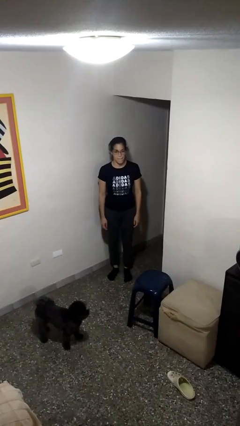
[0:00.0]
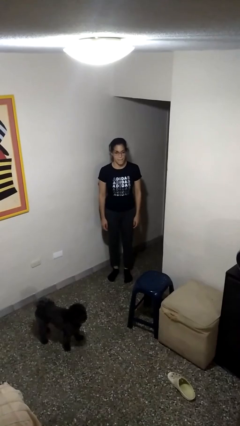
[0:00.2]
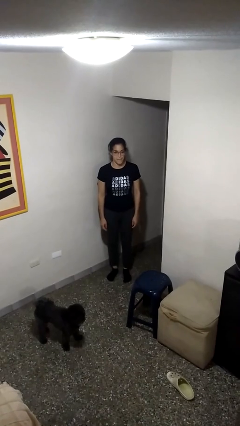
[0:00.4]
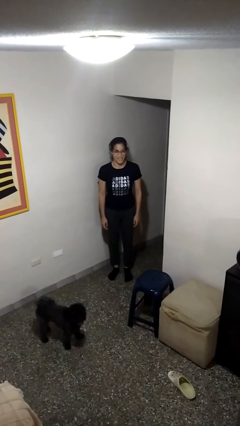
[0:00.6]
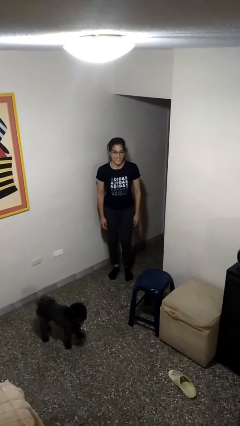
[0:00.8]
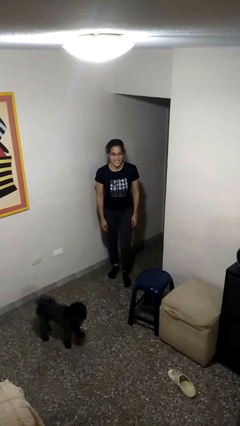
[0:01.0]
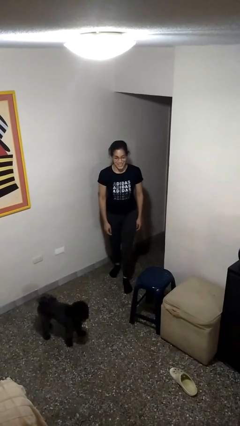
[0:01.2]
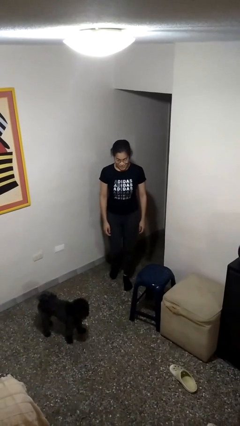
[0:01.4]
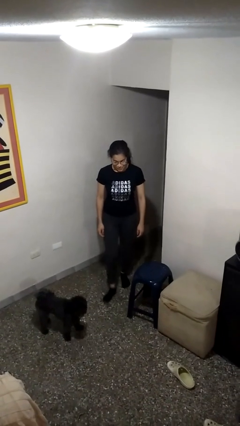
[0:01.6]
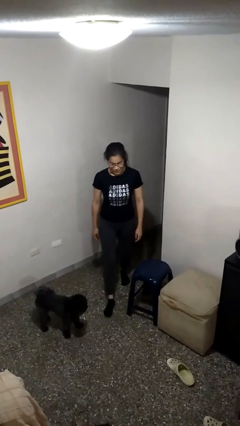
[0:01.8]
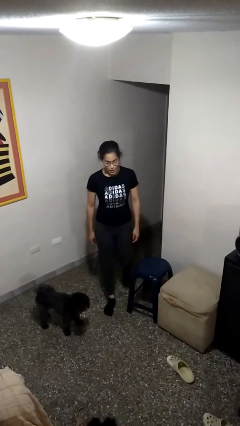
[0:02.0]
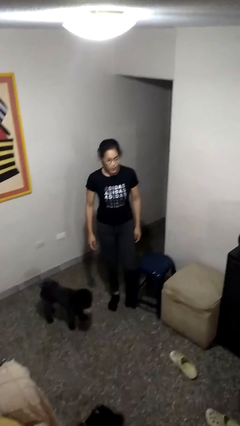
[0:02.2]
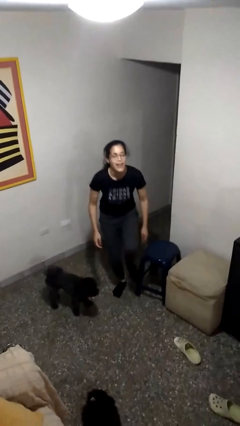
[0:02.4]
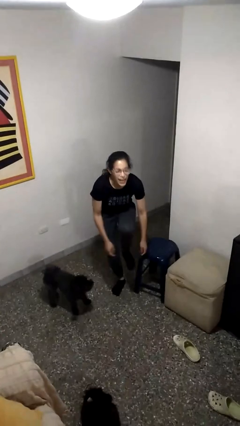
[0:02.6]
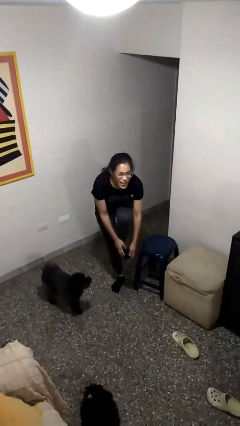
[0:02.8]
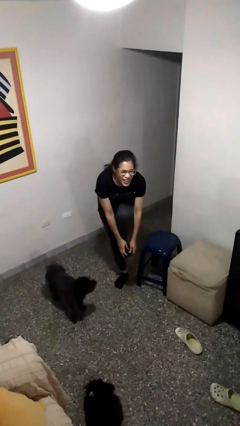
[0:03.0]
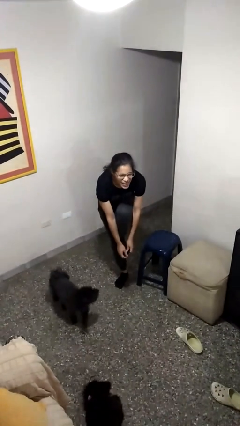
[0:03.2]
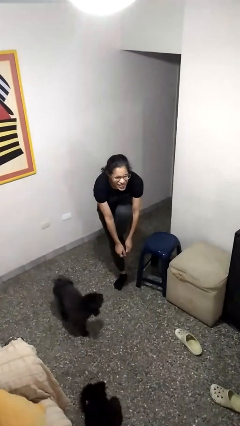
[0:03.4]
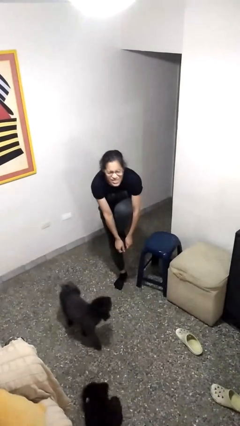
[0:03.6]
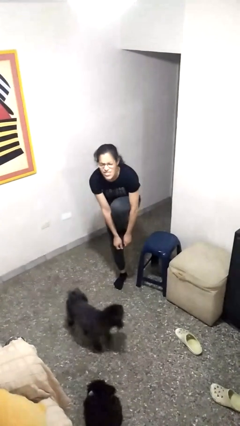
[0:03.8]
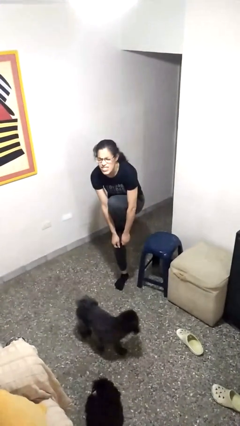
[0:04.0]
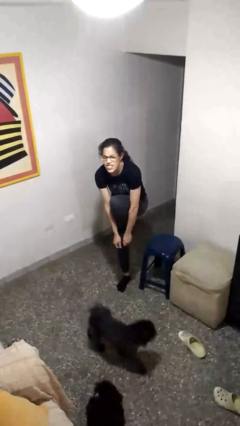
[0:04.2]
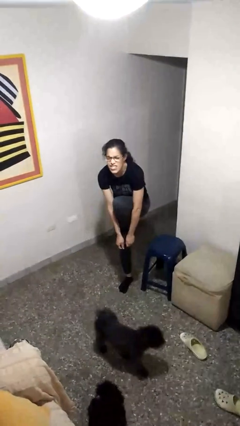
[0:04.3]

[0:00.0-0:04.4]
person stubs toe

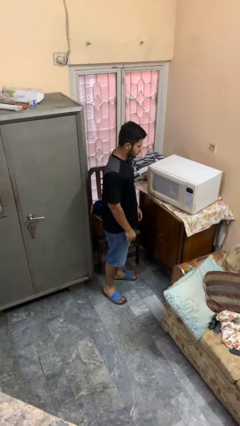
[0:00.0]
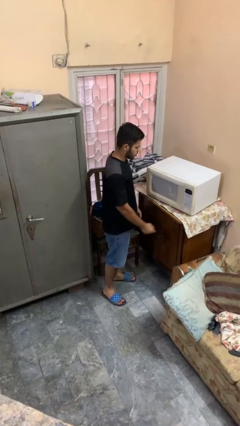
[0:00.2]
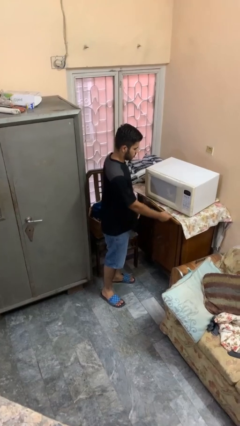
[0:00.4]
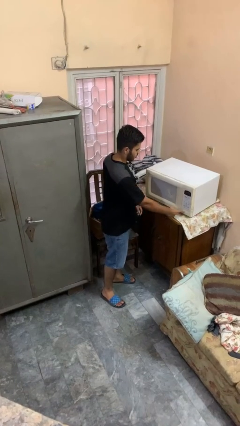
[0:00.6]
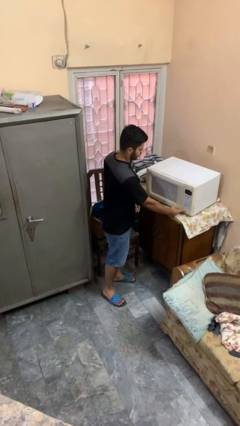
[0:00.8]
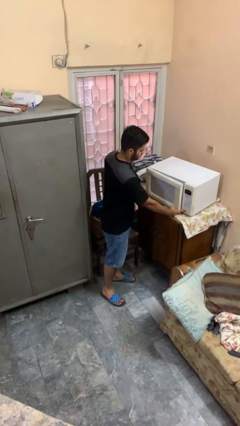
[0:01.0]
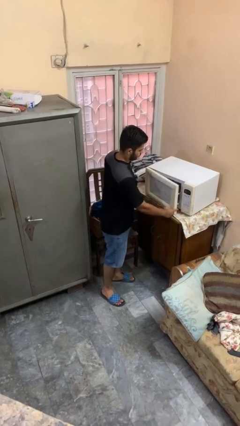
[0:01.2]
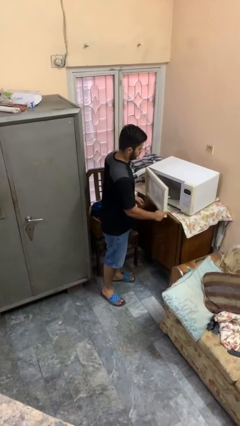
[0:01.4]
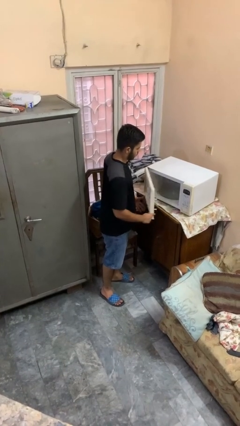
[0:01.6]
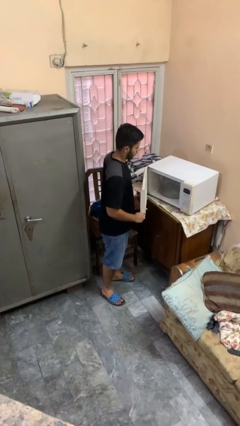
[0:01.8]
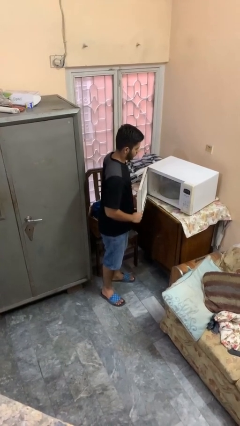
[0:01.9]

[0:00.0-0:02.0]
person opens microwave

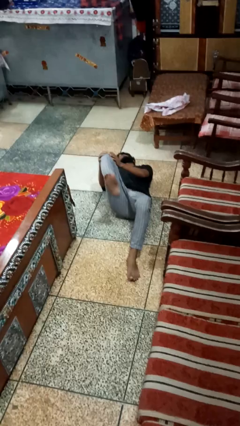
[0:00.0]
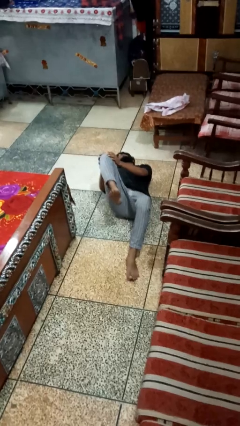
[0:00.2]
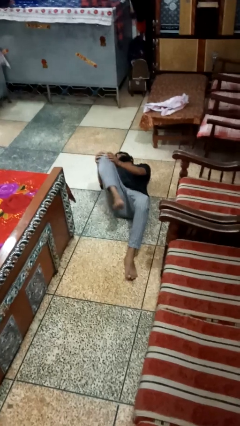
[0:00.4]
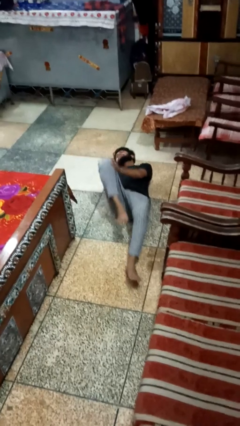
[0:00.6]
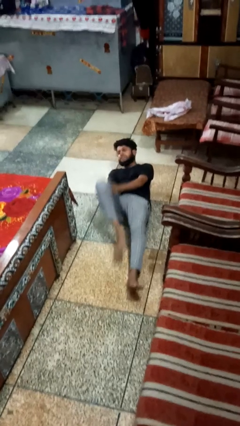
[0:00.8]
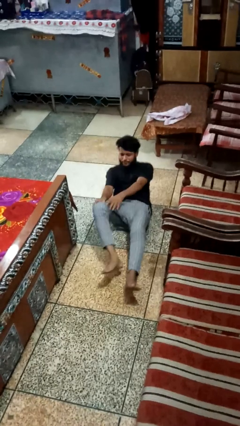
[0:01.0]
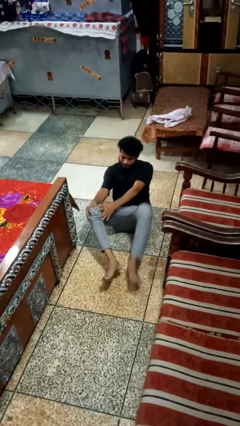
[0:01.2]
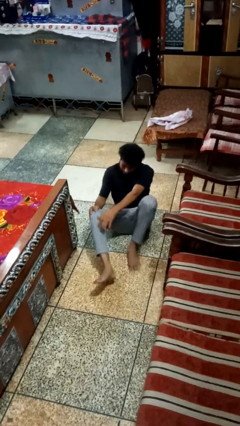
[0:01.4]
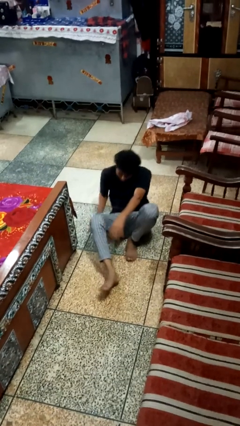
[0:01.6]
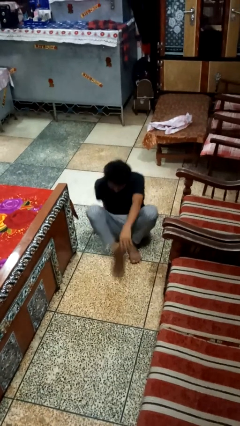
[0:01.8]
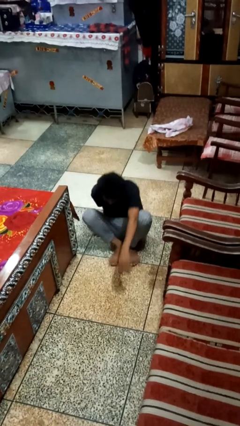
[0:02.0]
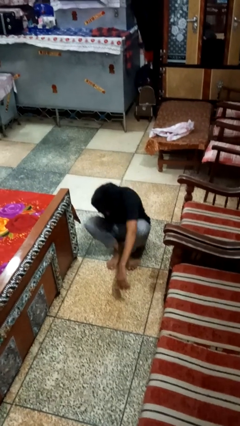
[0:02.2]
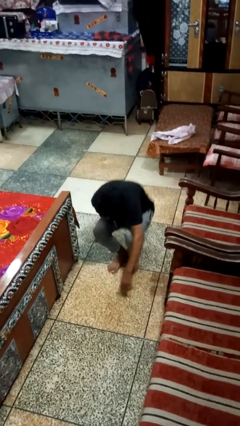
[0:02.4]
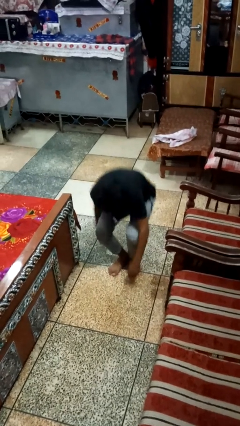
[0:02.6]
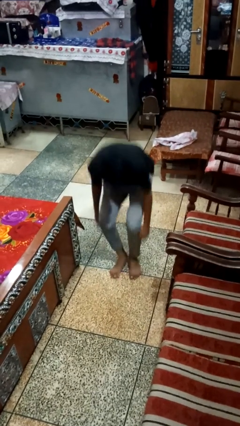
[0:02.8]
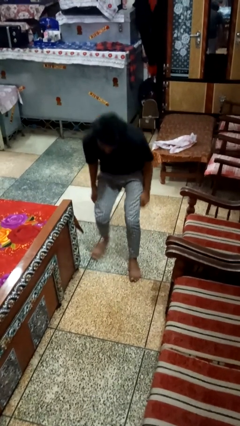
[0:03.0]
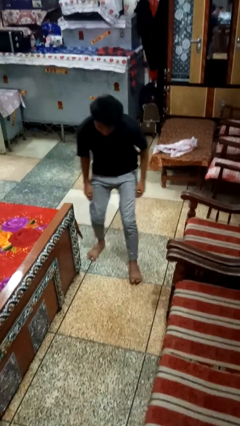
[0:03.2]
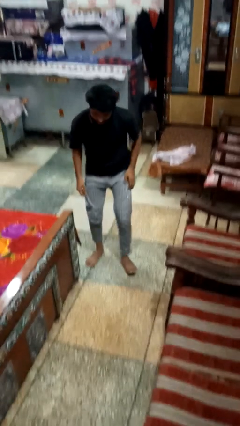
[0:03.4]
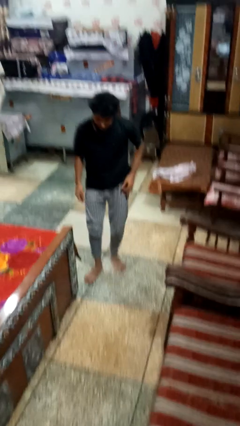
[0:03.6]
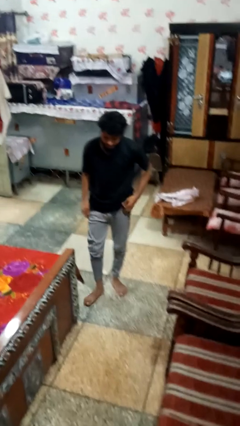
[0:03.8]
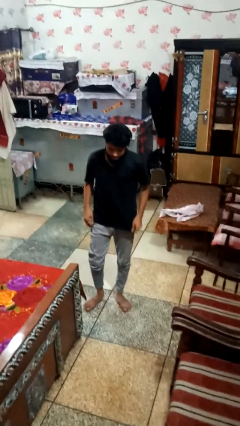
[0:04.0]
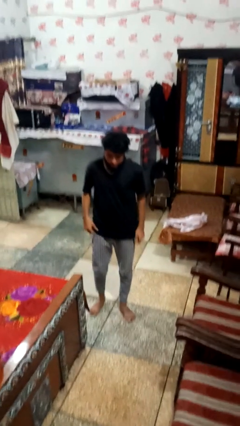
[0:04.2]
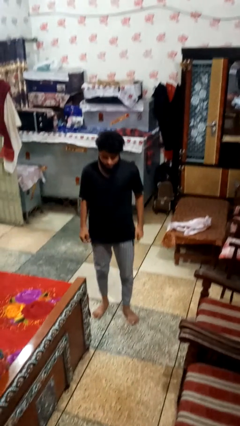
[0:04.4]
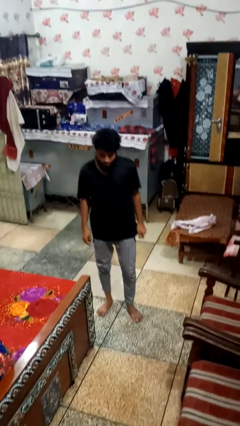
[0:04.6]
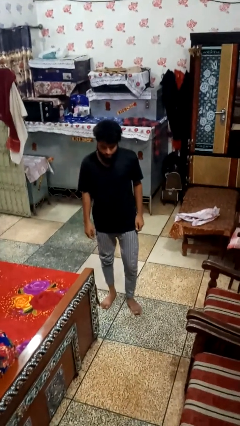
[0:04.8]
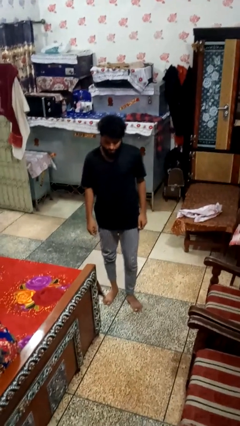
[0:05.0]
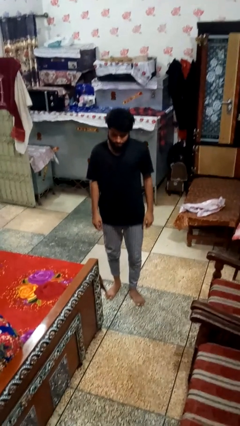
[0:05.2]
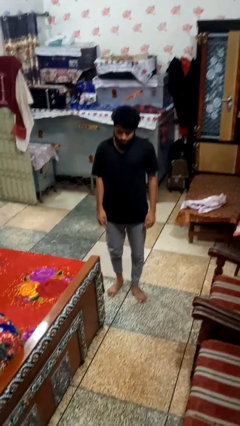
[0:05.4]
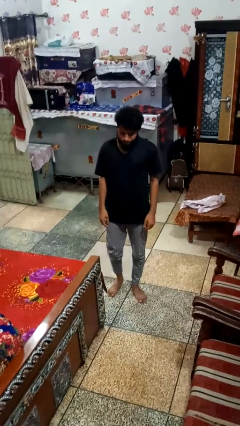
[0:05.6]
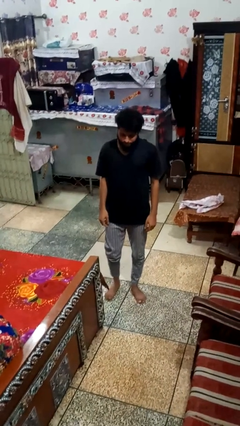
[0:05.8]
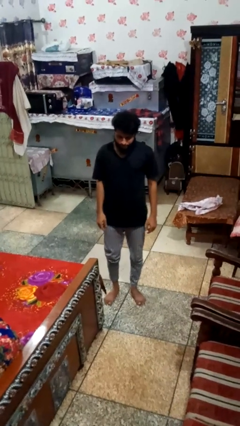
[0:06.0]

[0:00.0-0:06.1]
person stands up from floor

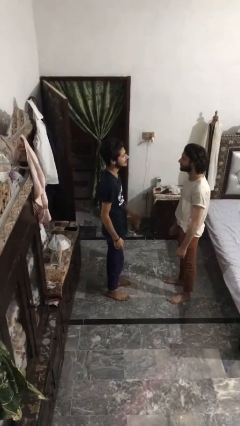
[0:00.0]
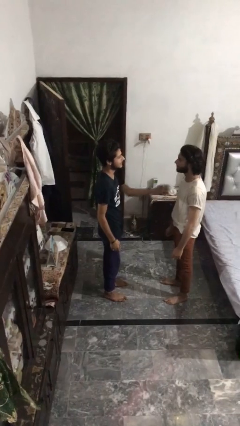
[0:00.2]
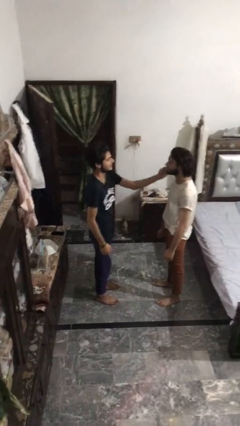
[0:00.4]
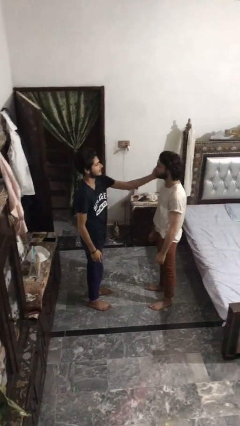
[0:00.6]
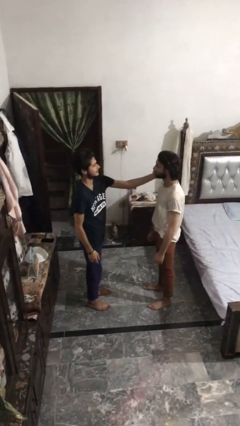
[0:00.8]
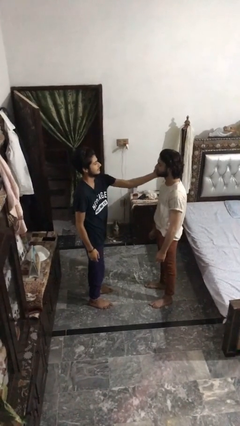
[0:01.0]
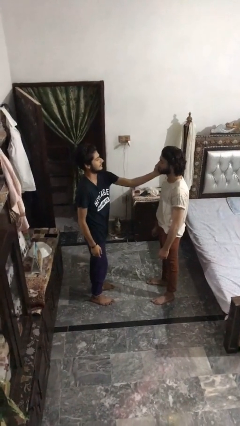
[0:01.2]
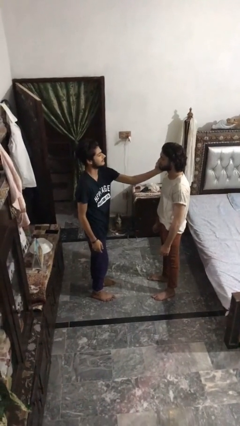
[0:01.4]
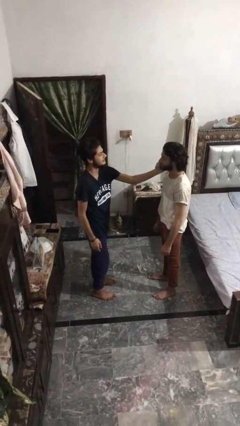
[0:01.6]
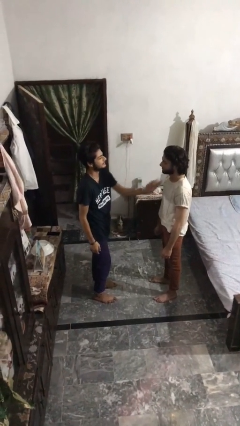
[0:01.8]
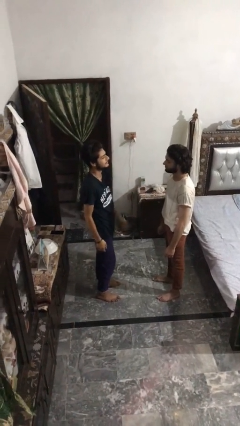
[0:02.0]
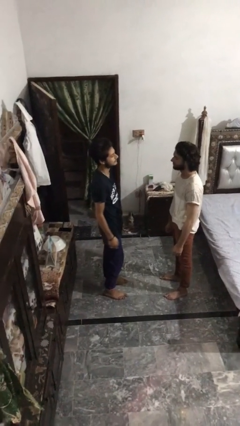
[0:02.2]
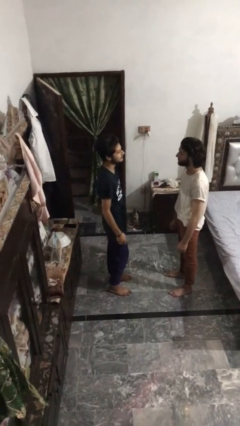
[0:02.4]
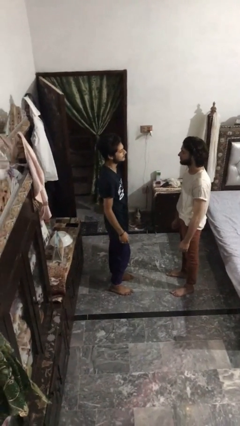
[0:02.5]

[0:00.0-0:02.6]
person touches face of person

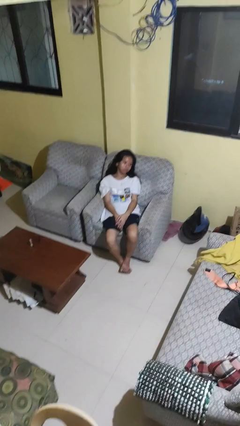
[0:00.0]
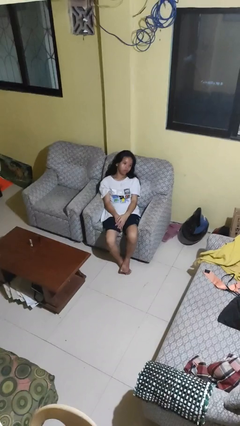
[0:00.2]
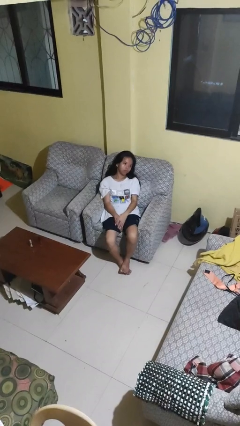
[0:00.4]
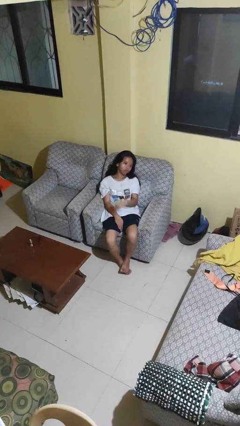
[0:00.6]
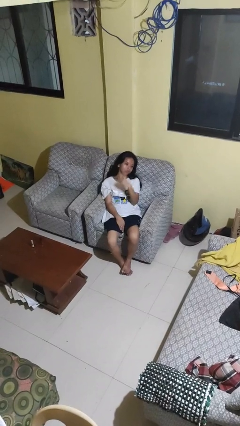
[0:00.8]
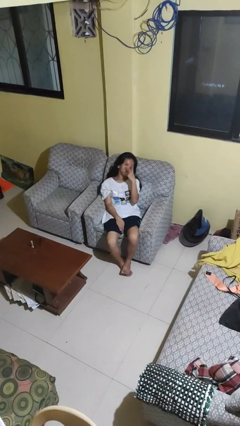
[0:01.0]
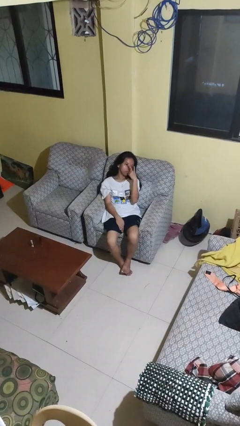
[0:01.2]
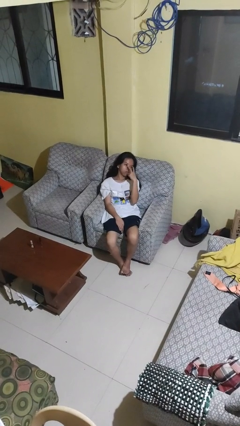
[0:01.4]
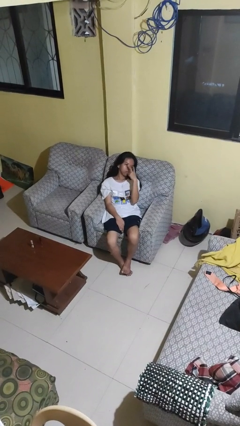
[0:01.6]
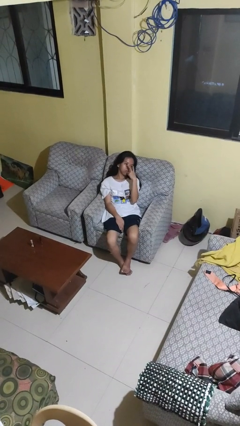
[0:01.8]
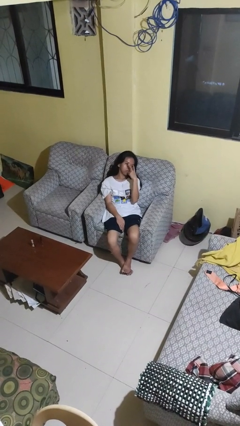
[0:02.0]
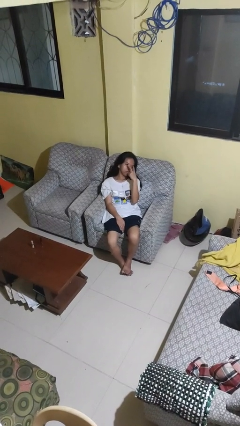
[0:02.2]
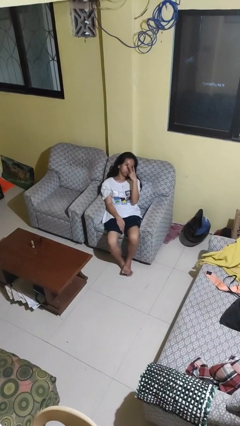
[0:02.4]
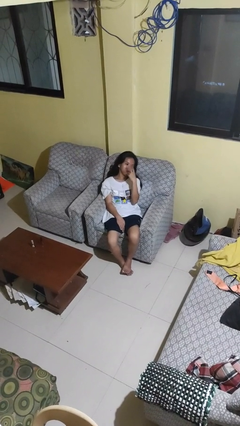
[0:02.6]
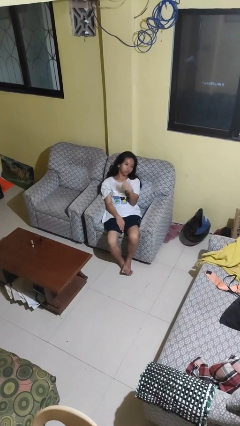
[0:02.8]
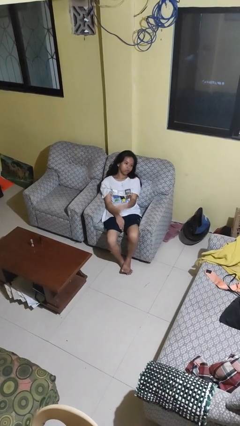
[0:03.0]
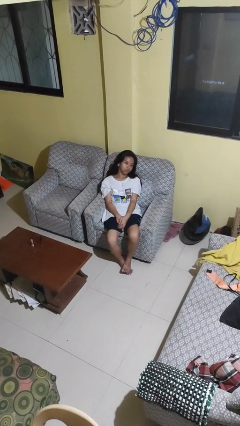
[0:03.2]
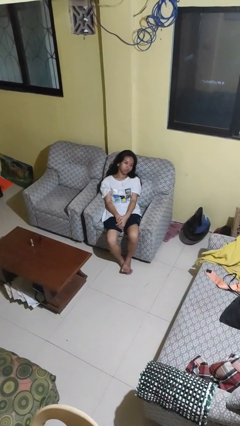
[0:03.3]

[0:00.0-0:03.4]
person gestures watch closely
